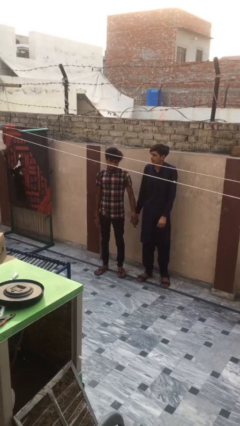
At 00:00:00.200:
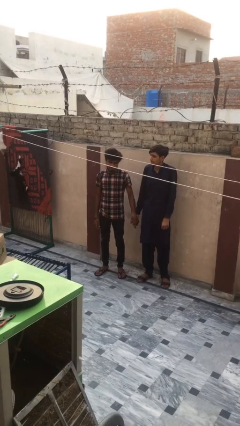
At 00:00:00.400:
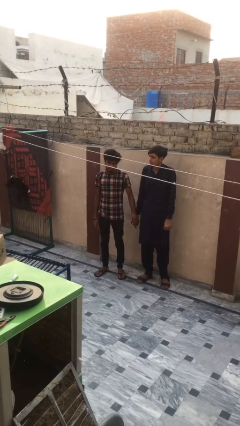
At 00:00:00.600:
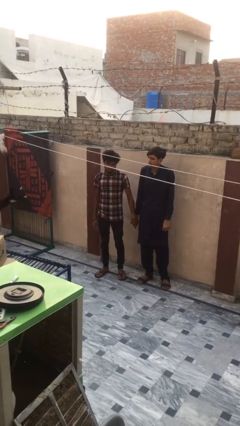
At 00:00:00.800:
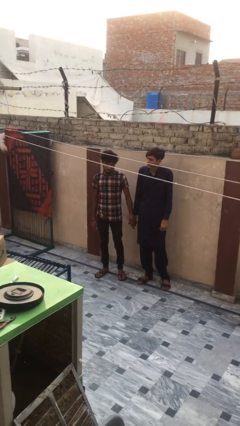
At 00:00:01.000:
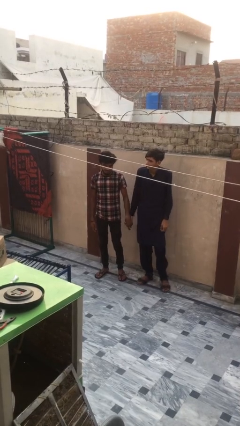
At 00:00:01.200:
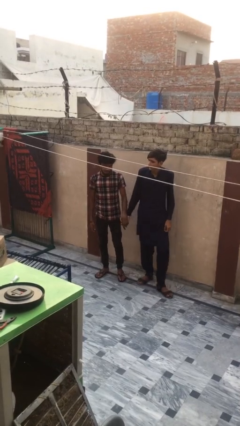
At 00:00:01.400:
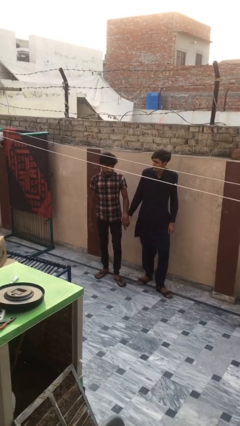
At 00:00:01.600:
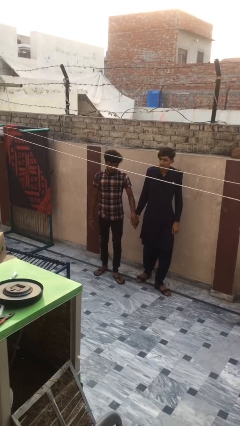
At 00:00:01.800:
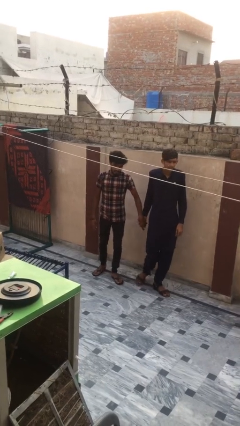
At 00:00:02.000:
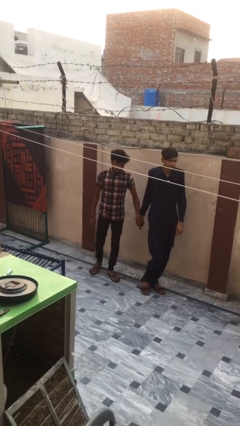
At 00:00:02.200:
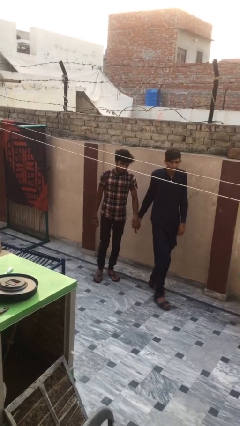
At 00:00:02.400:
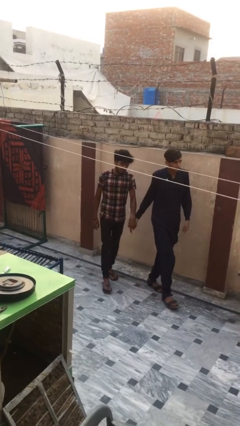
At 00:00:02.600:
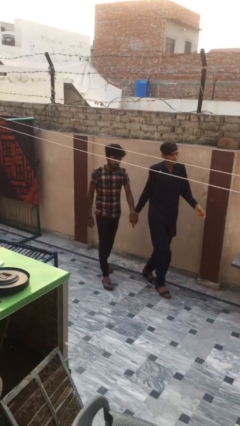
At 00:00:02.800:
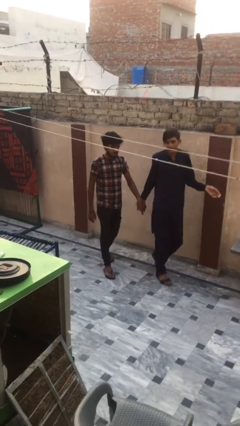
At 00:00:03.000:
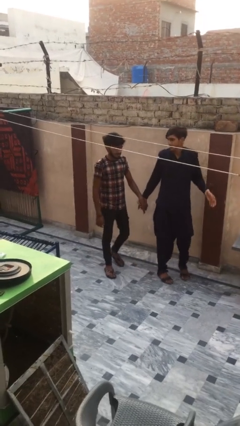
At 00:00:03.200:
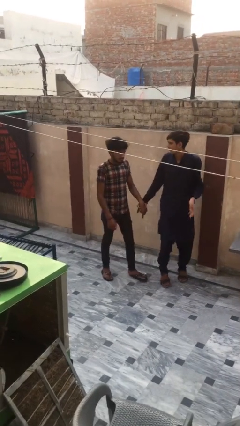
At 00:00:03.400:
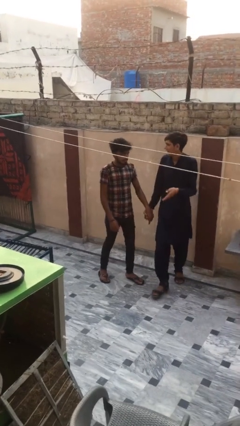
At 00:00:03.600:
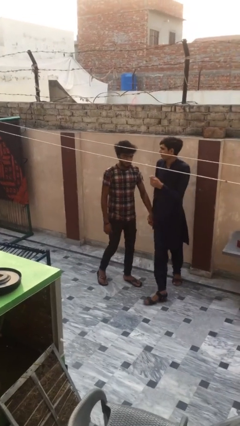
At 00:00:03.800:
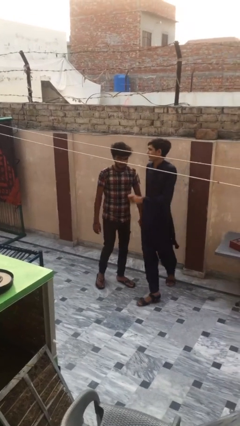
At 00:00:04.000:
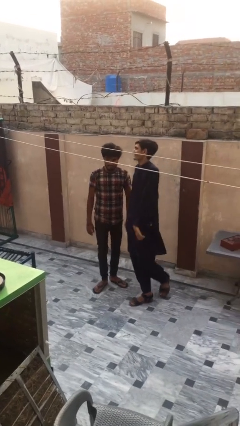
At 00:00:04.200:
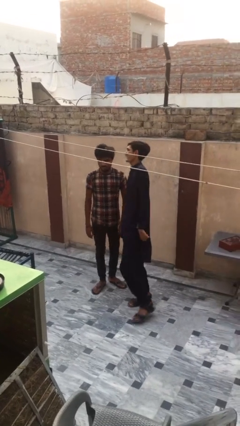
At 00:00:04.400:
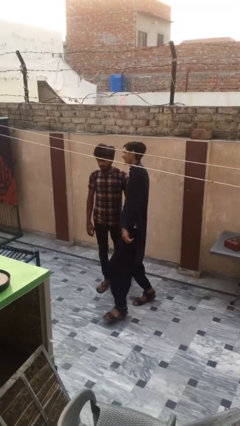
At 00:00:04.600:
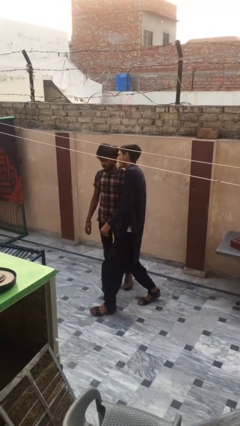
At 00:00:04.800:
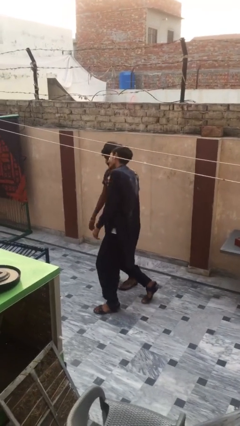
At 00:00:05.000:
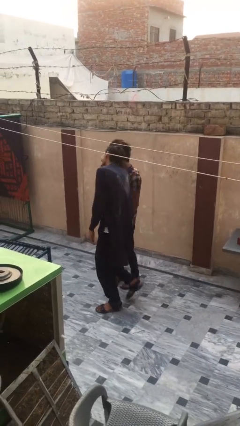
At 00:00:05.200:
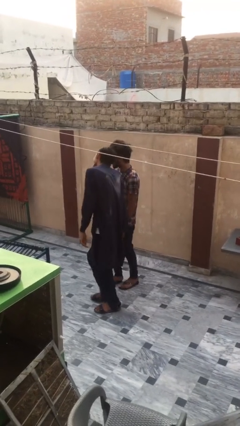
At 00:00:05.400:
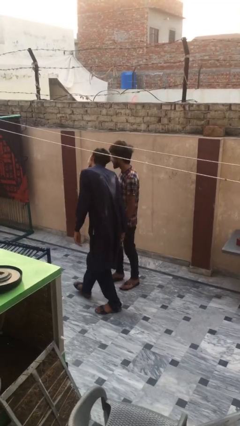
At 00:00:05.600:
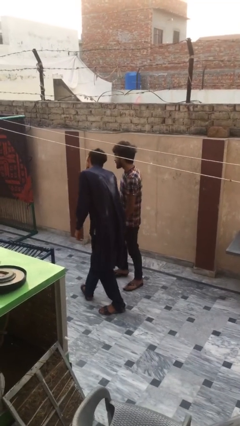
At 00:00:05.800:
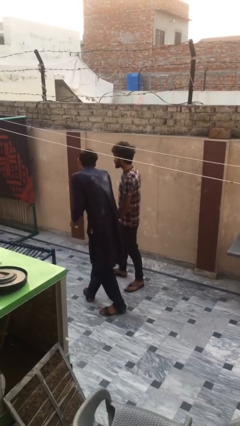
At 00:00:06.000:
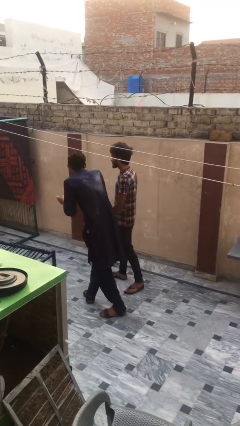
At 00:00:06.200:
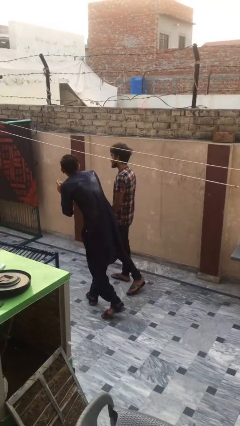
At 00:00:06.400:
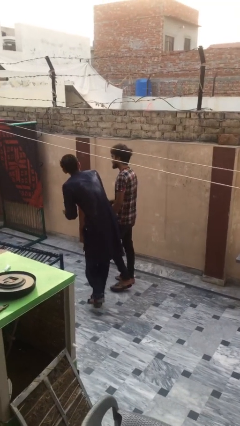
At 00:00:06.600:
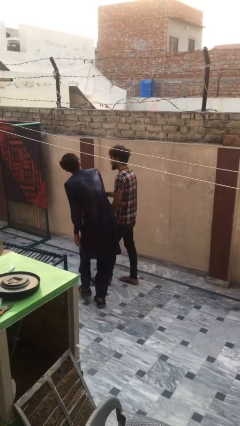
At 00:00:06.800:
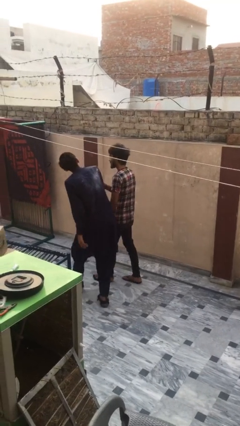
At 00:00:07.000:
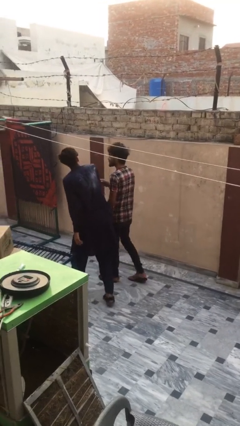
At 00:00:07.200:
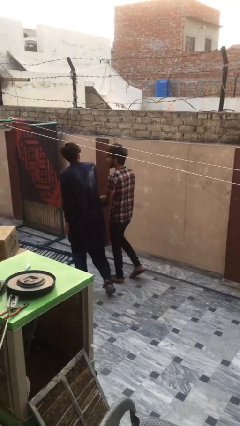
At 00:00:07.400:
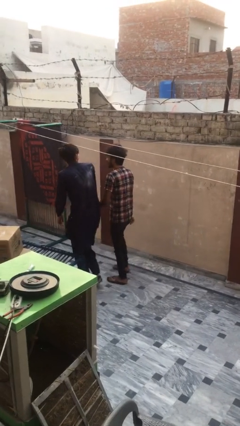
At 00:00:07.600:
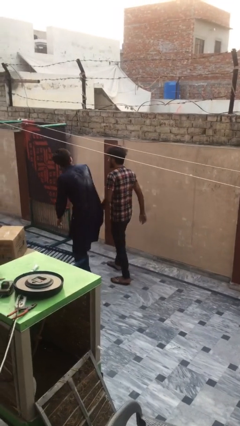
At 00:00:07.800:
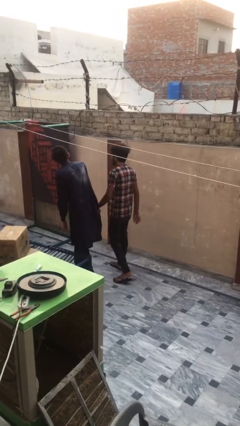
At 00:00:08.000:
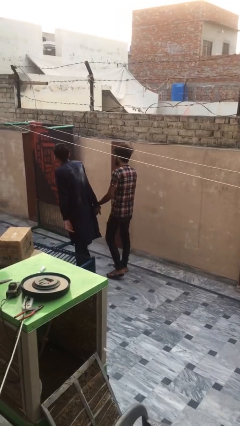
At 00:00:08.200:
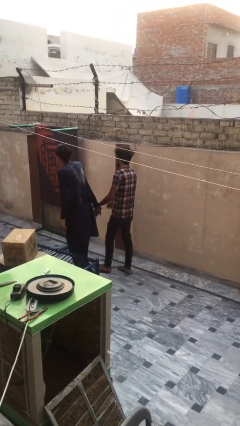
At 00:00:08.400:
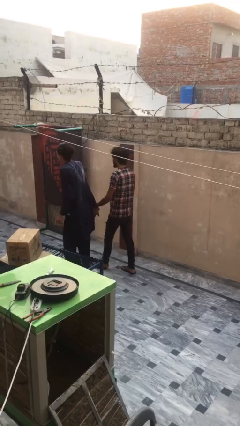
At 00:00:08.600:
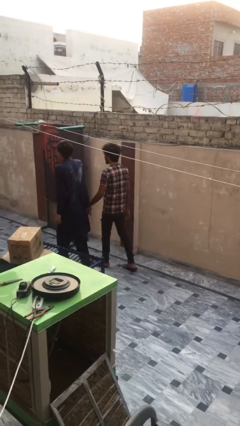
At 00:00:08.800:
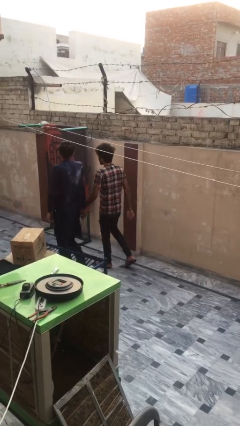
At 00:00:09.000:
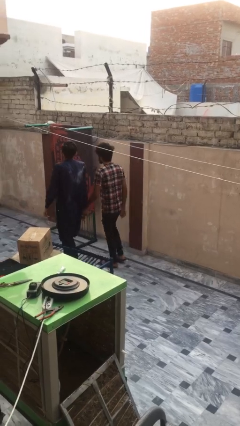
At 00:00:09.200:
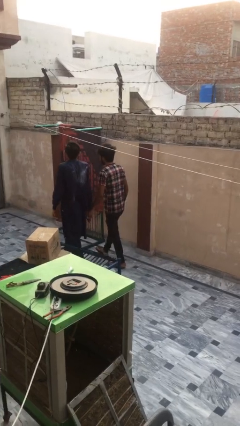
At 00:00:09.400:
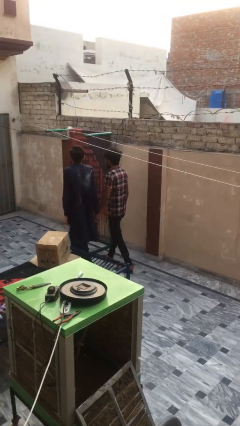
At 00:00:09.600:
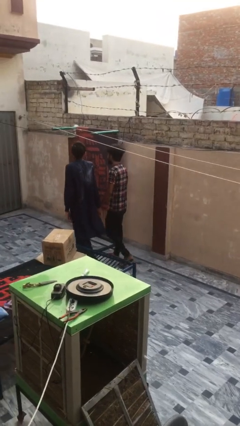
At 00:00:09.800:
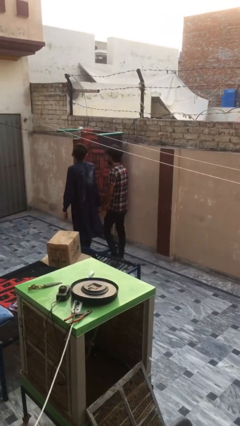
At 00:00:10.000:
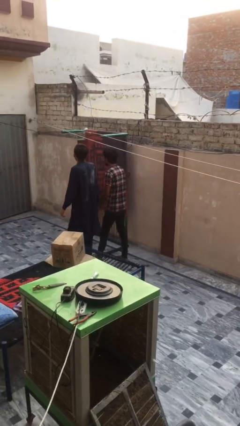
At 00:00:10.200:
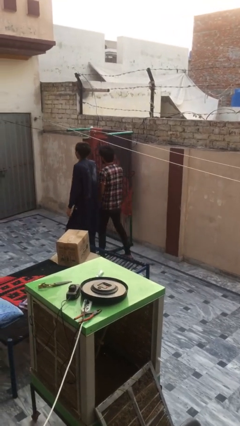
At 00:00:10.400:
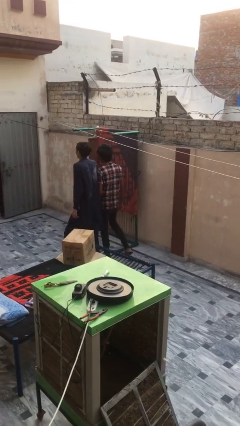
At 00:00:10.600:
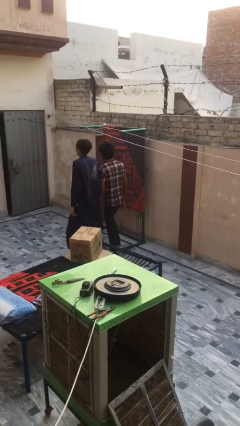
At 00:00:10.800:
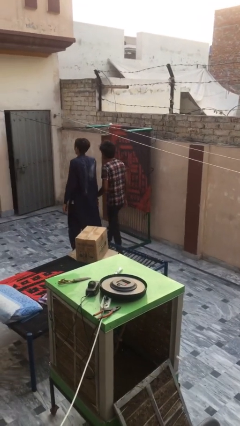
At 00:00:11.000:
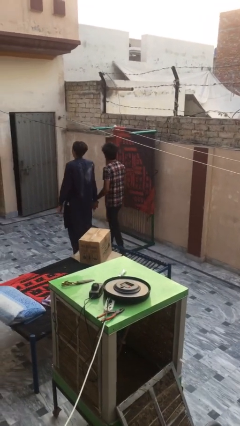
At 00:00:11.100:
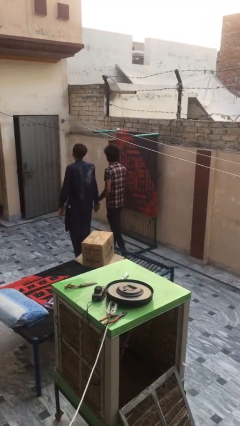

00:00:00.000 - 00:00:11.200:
person holds hand

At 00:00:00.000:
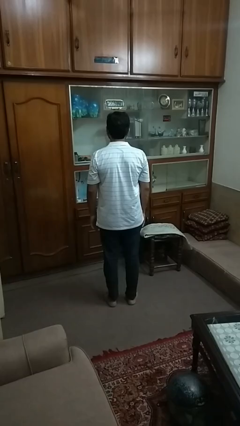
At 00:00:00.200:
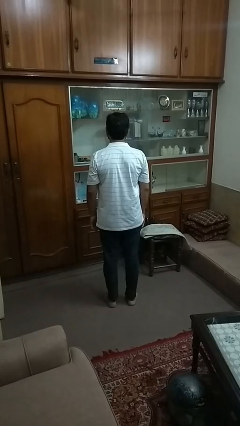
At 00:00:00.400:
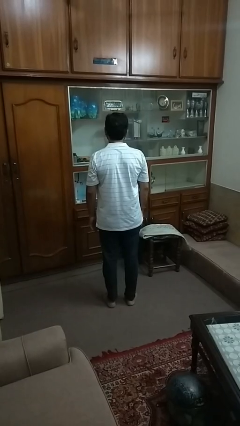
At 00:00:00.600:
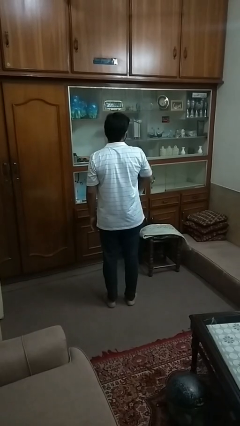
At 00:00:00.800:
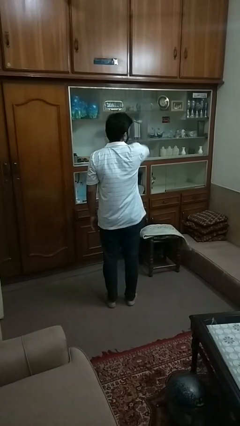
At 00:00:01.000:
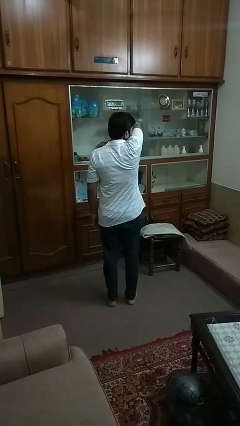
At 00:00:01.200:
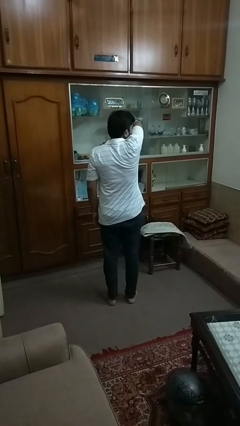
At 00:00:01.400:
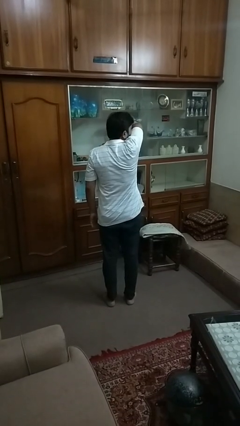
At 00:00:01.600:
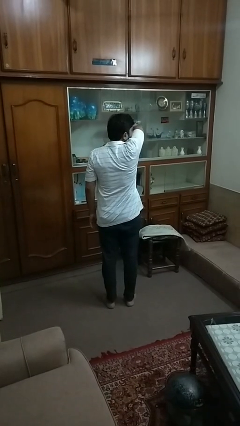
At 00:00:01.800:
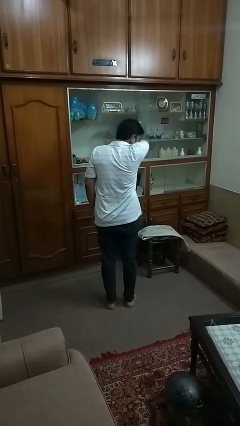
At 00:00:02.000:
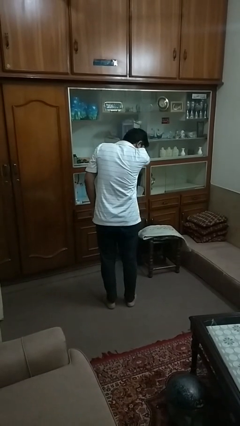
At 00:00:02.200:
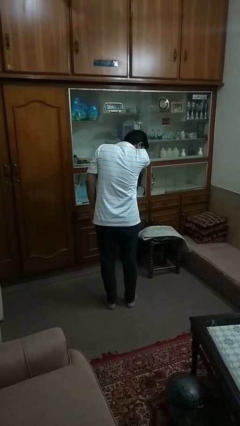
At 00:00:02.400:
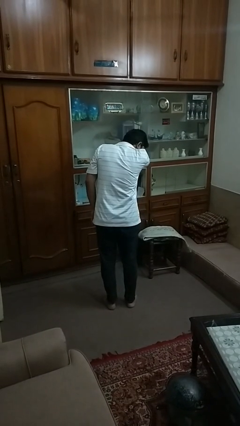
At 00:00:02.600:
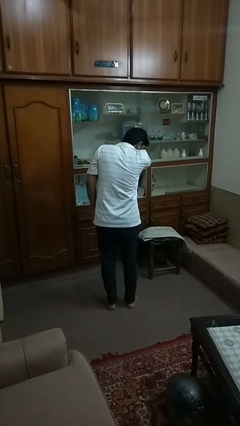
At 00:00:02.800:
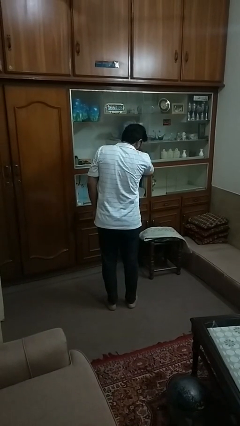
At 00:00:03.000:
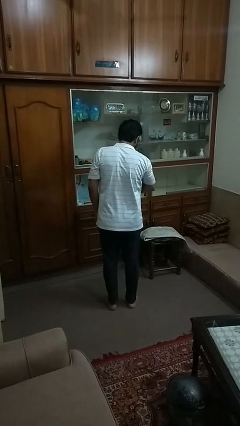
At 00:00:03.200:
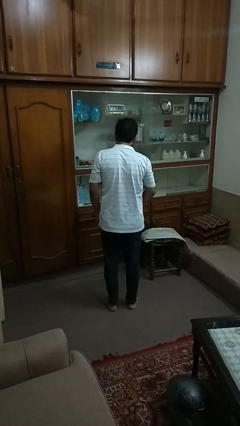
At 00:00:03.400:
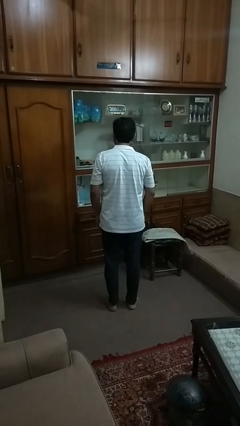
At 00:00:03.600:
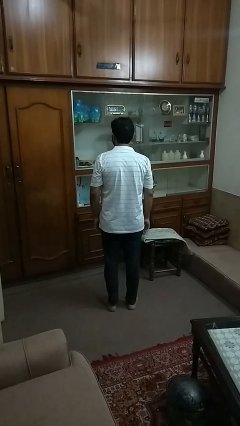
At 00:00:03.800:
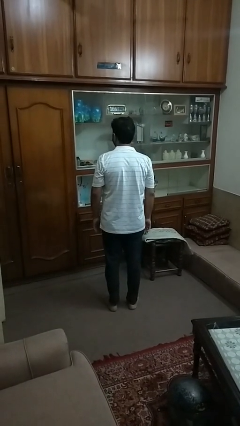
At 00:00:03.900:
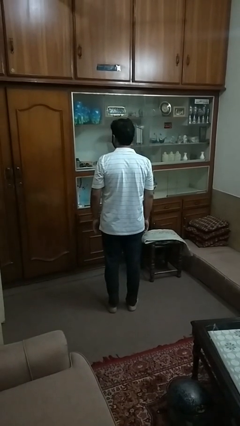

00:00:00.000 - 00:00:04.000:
person sneezes into arm

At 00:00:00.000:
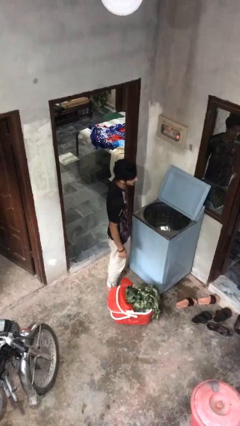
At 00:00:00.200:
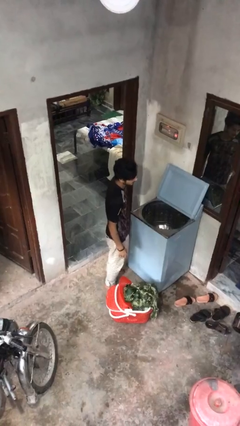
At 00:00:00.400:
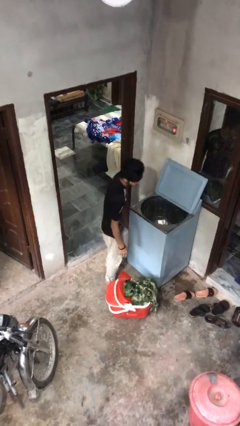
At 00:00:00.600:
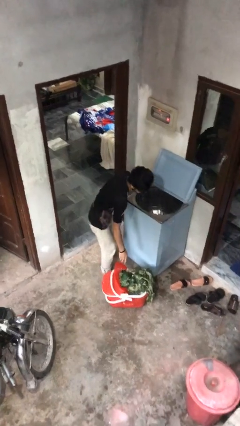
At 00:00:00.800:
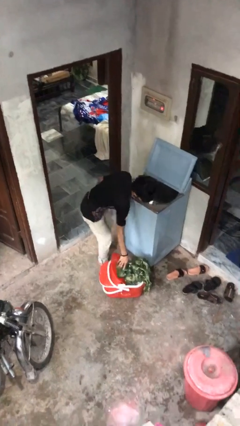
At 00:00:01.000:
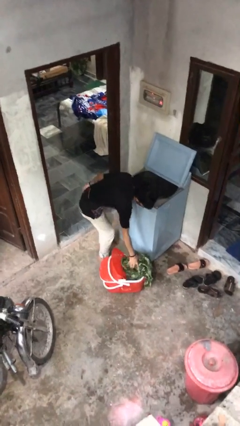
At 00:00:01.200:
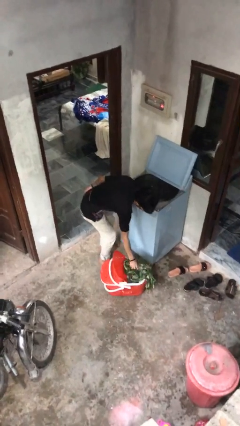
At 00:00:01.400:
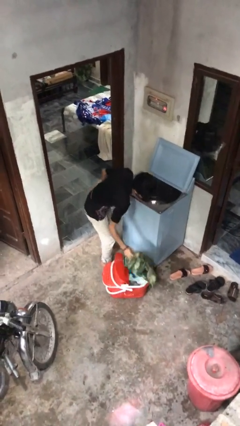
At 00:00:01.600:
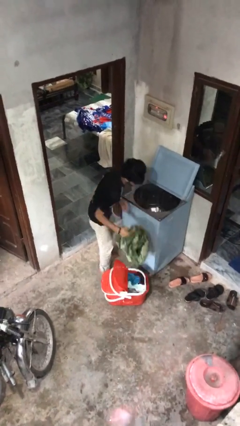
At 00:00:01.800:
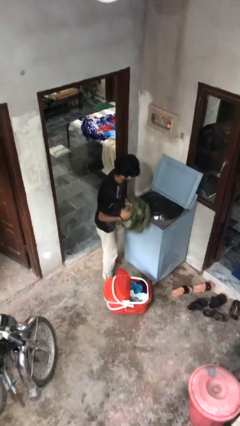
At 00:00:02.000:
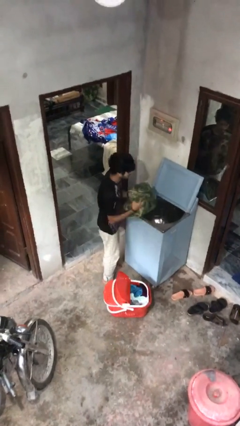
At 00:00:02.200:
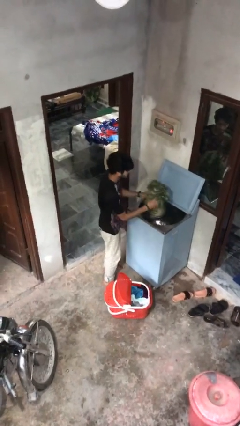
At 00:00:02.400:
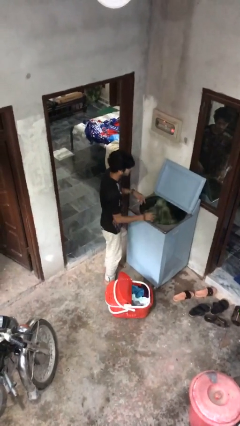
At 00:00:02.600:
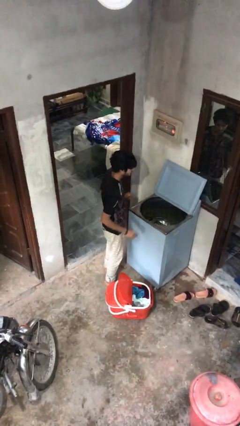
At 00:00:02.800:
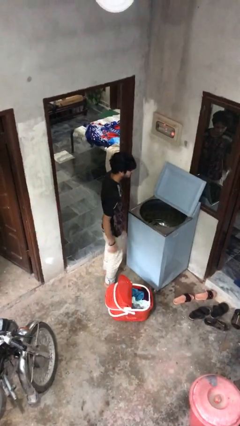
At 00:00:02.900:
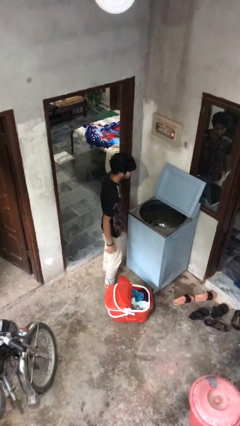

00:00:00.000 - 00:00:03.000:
person loads clotheswasher
